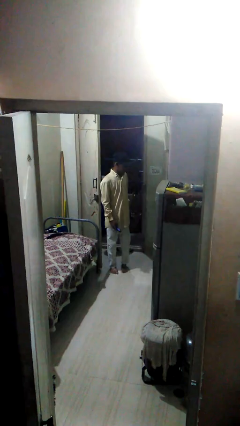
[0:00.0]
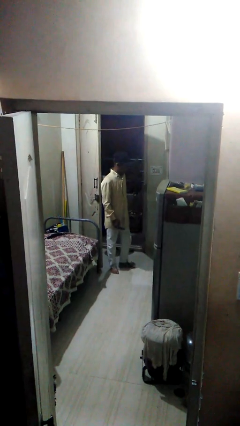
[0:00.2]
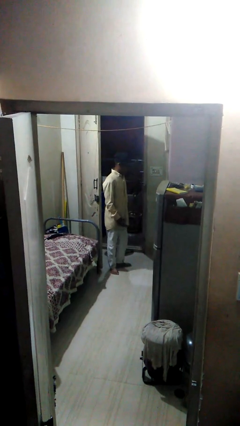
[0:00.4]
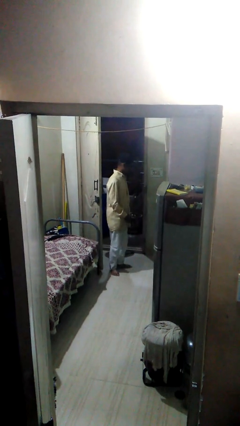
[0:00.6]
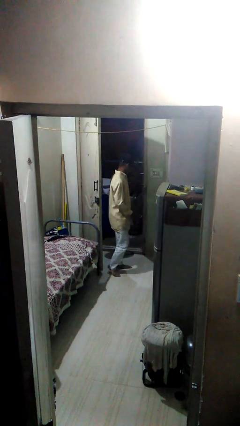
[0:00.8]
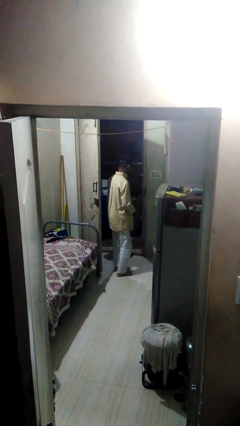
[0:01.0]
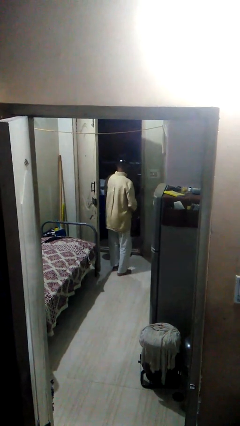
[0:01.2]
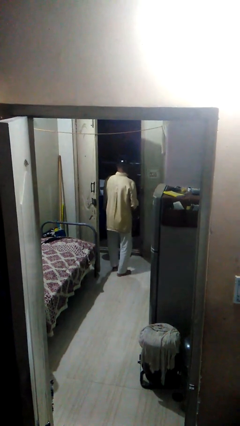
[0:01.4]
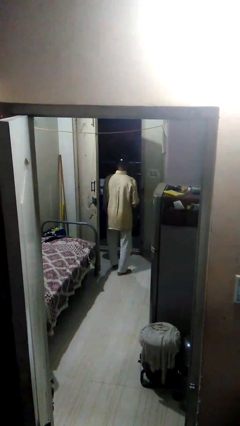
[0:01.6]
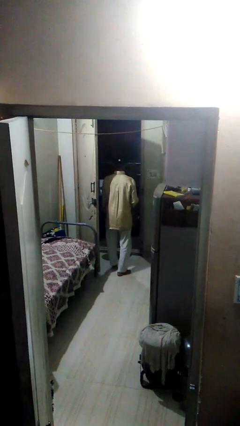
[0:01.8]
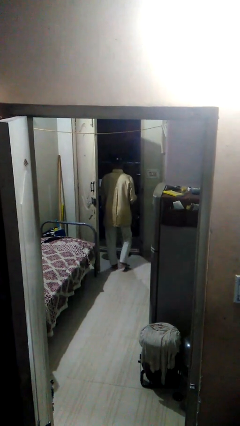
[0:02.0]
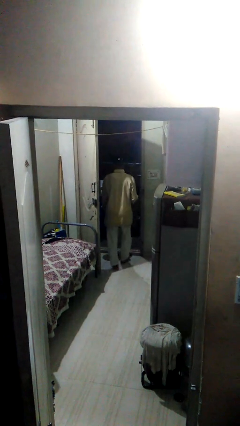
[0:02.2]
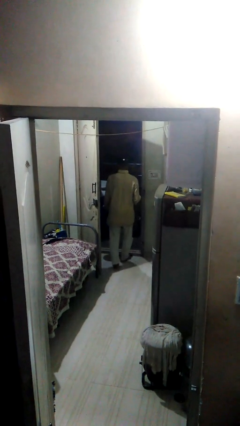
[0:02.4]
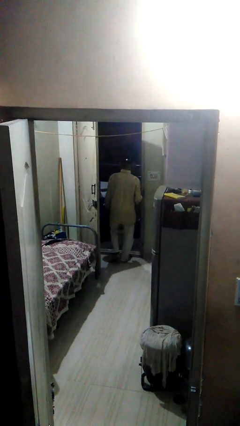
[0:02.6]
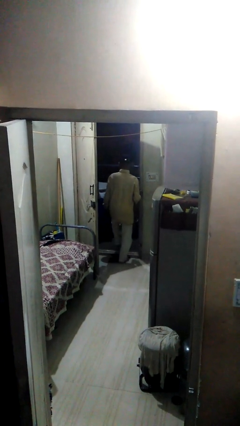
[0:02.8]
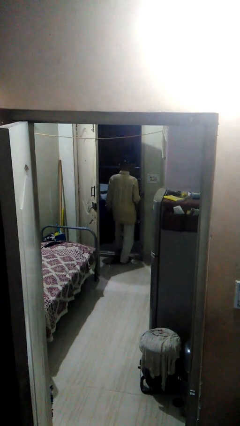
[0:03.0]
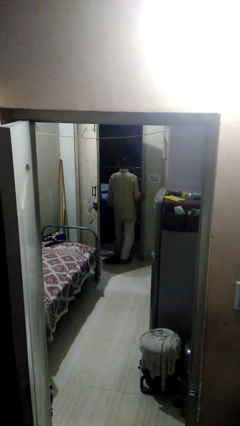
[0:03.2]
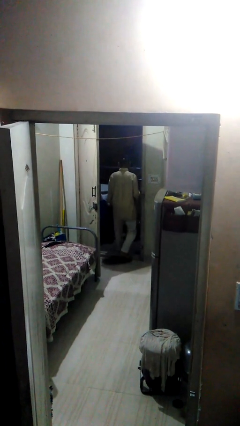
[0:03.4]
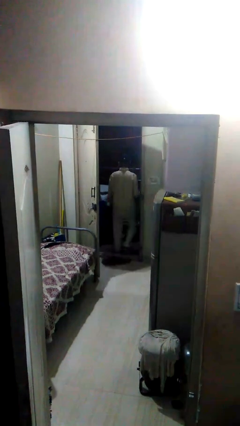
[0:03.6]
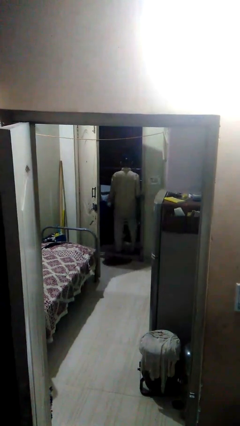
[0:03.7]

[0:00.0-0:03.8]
person exits scene through structure

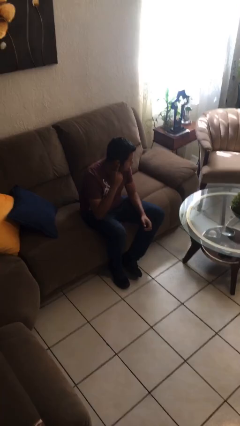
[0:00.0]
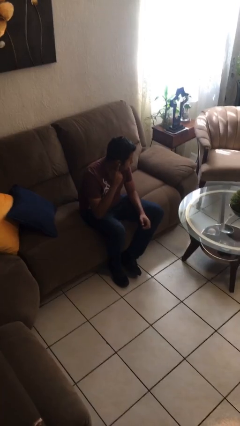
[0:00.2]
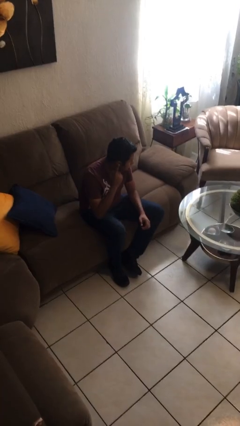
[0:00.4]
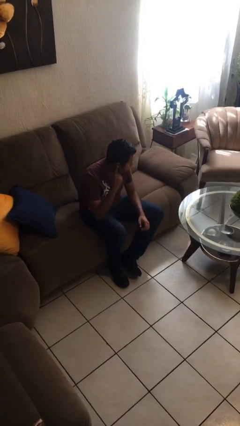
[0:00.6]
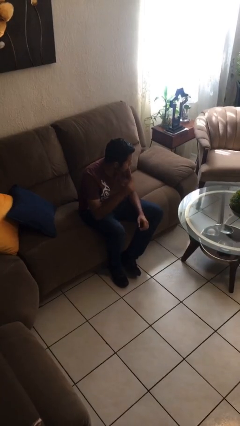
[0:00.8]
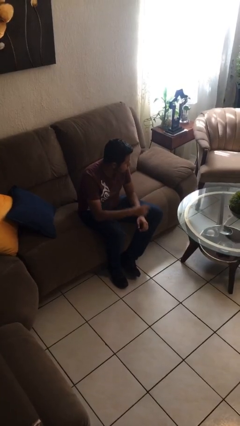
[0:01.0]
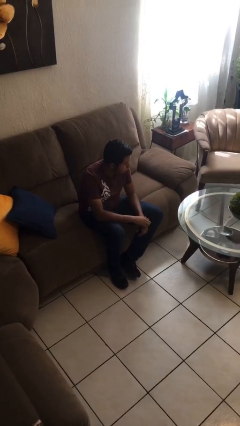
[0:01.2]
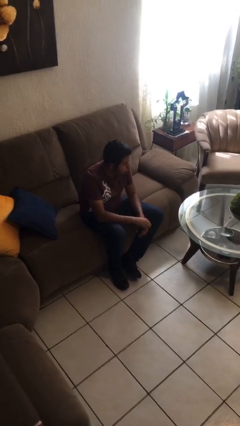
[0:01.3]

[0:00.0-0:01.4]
person gestures listen closely

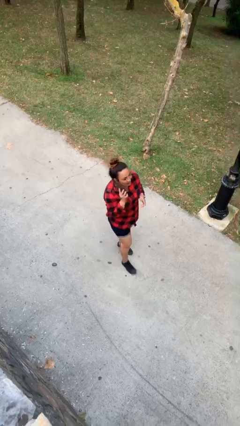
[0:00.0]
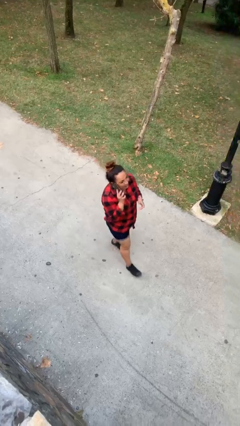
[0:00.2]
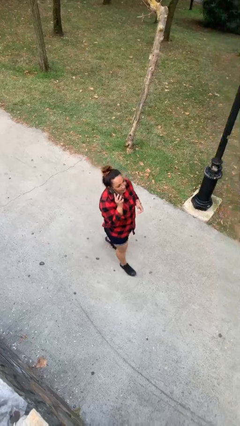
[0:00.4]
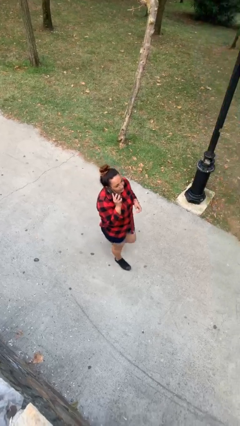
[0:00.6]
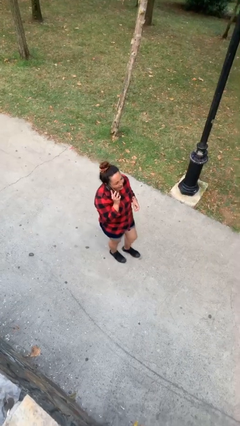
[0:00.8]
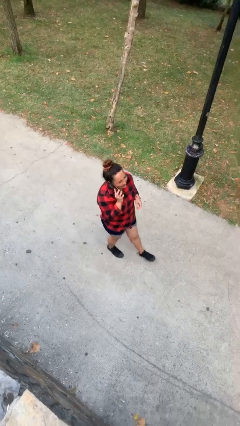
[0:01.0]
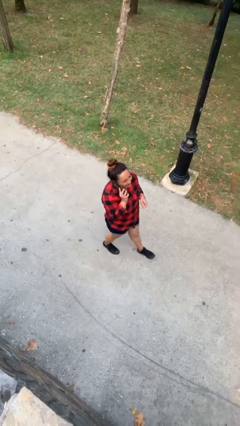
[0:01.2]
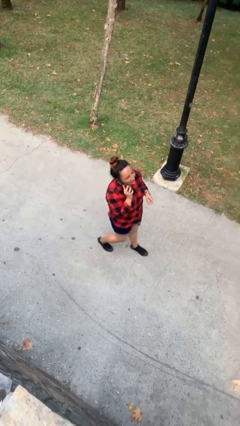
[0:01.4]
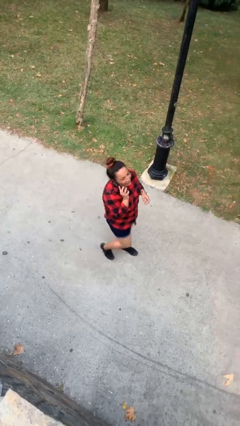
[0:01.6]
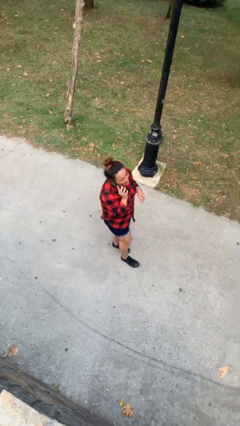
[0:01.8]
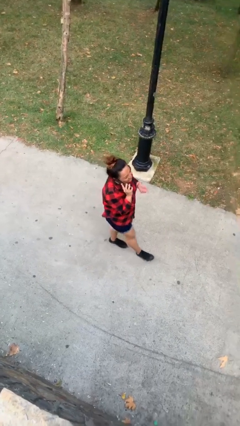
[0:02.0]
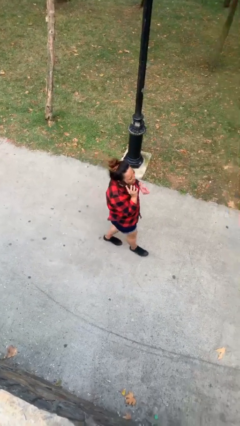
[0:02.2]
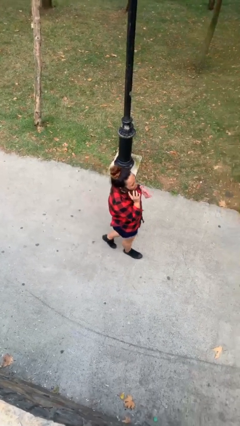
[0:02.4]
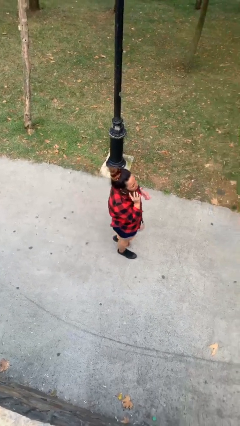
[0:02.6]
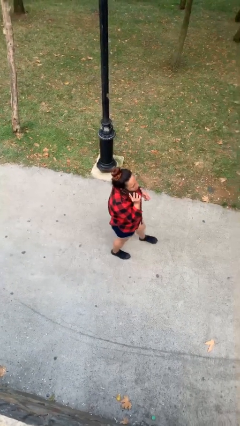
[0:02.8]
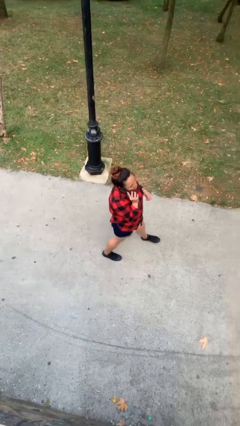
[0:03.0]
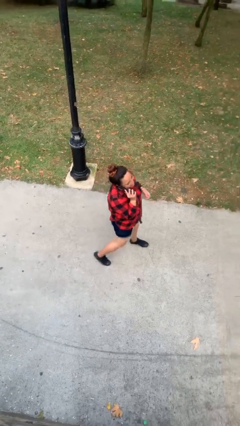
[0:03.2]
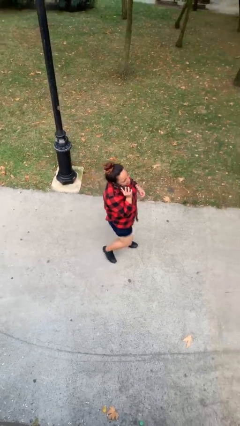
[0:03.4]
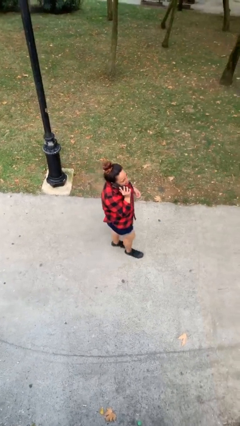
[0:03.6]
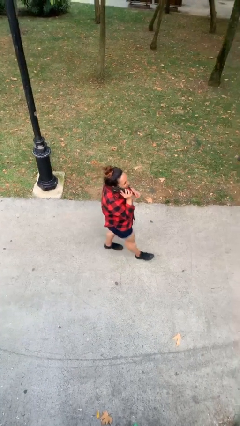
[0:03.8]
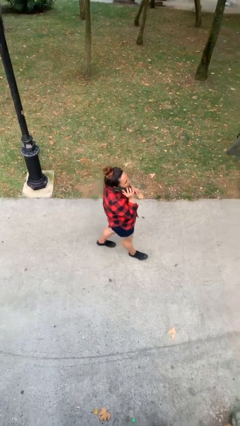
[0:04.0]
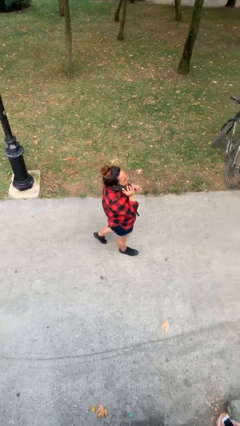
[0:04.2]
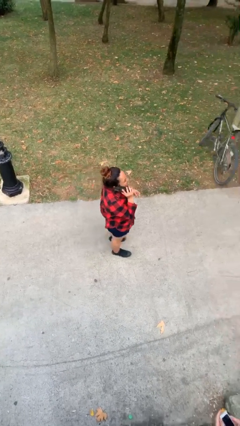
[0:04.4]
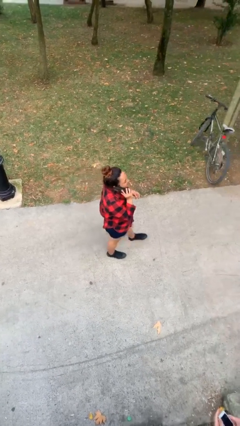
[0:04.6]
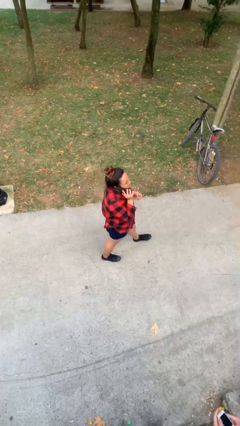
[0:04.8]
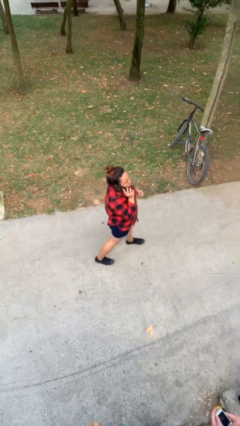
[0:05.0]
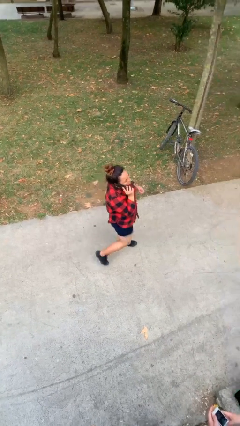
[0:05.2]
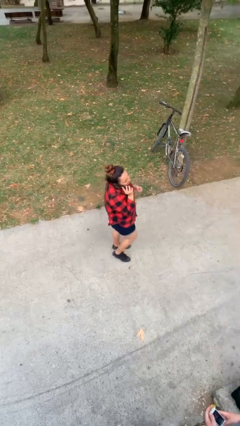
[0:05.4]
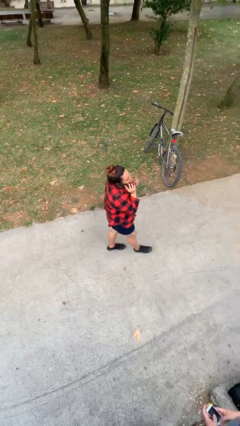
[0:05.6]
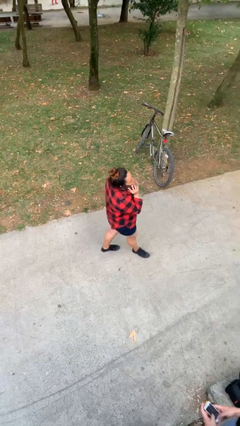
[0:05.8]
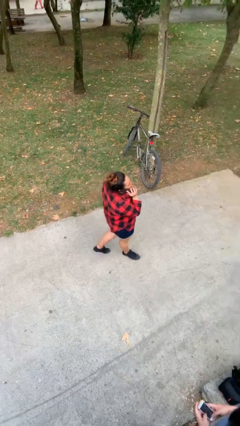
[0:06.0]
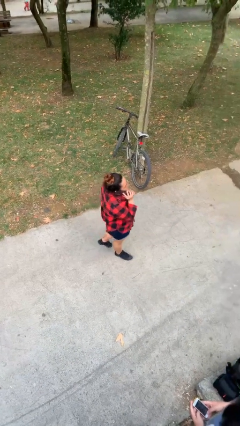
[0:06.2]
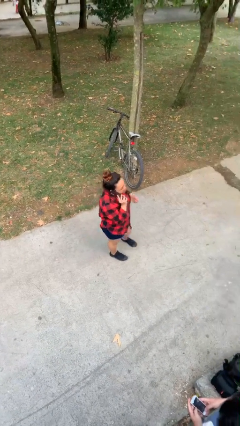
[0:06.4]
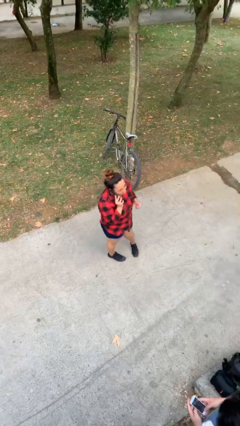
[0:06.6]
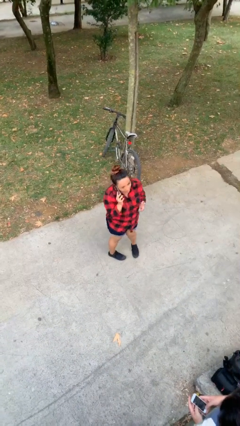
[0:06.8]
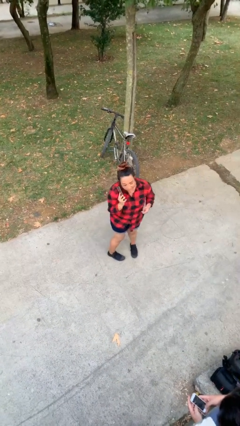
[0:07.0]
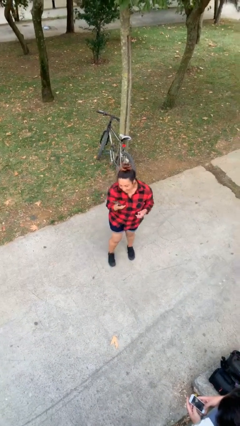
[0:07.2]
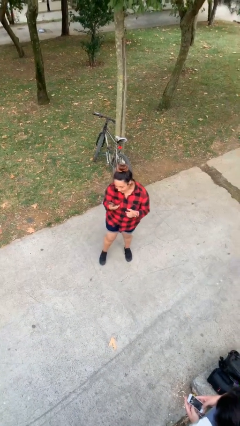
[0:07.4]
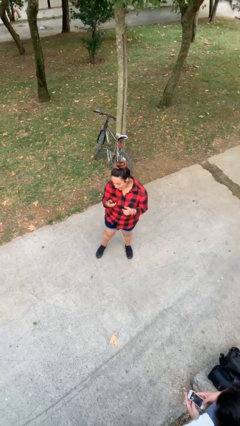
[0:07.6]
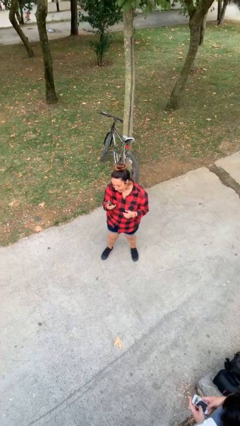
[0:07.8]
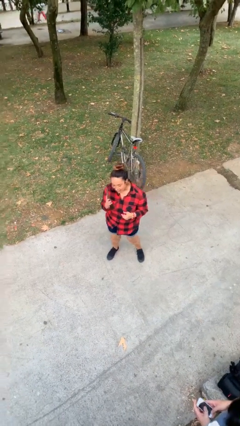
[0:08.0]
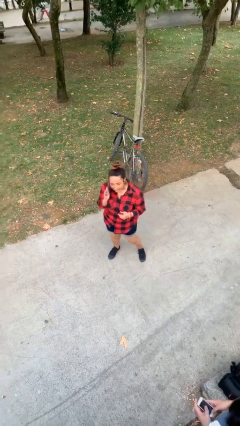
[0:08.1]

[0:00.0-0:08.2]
person talks on phone

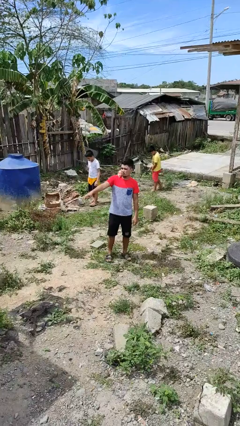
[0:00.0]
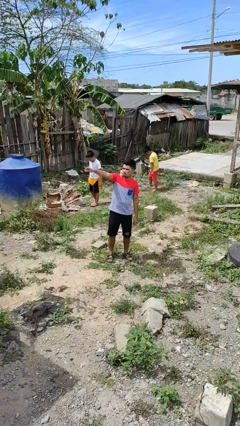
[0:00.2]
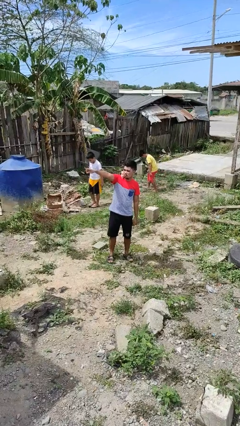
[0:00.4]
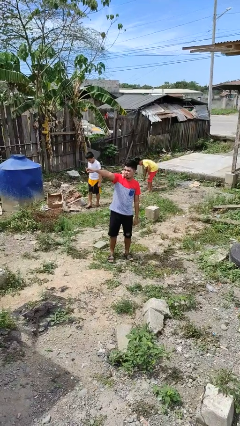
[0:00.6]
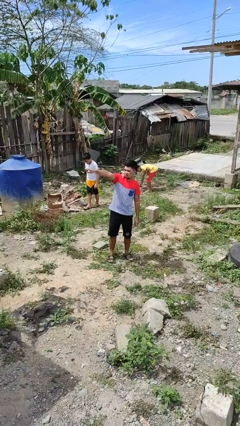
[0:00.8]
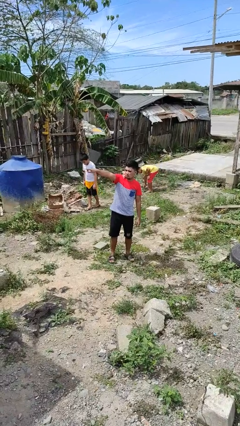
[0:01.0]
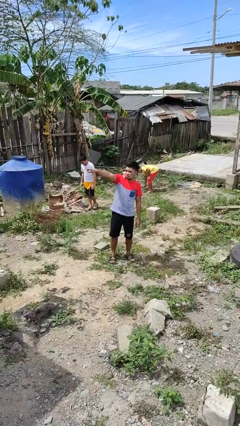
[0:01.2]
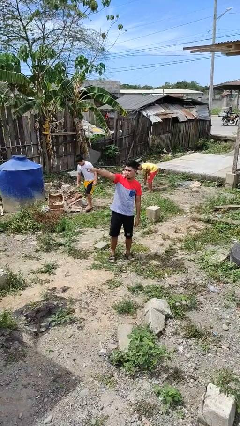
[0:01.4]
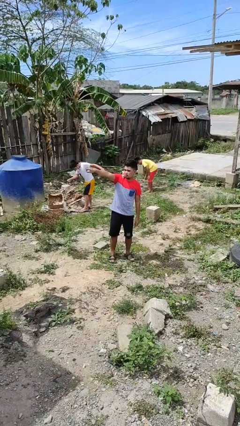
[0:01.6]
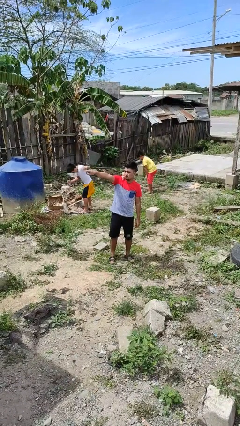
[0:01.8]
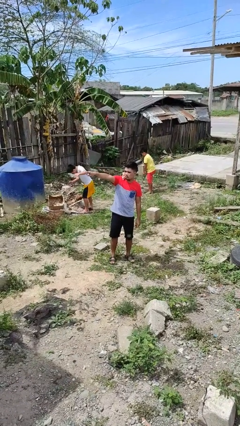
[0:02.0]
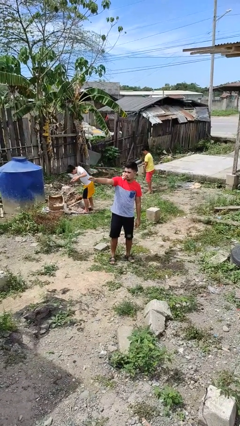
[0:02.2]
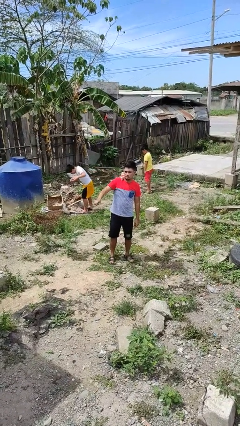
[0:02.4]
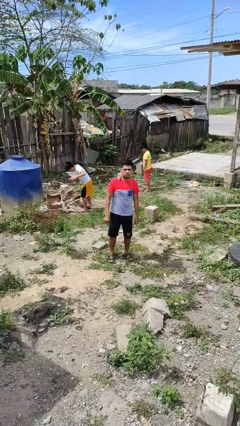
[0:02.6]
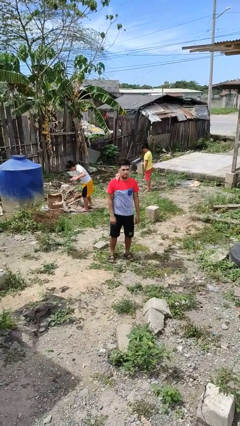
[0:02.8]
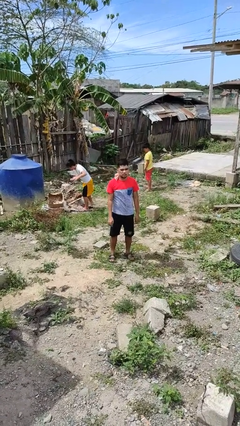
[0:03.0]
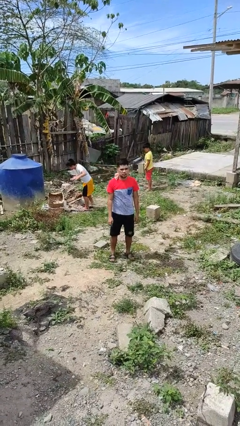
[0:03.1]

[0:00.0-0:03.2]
person points at person

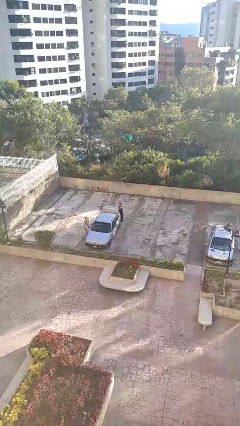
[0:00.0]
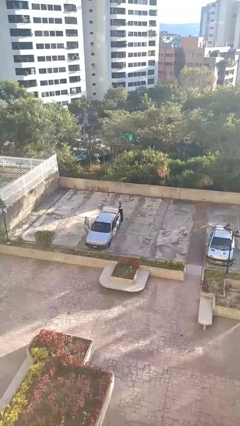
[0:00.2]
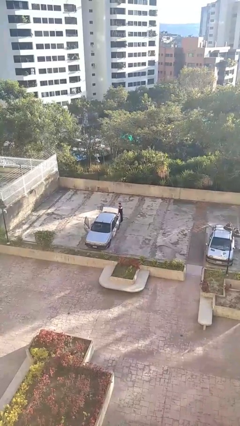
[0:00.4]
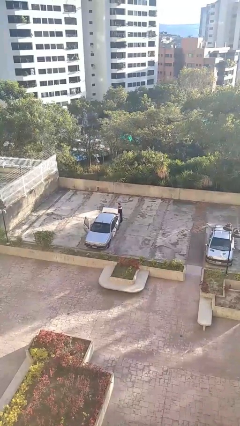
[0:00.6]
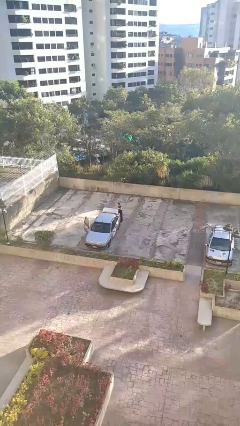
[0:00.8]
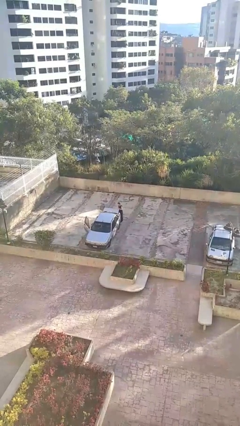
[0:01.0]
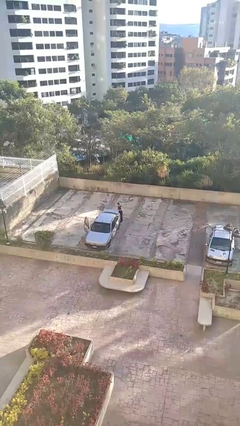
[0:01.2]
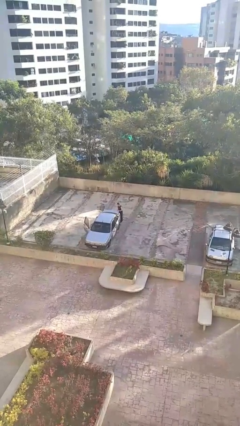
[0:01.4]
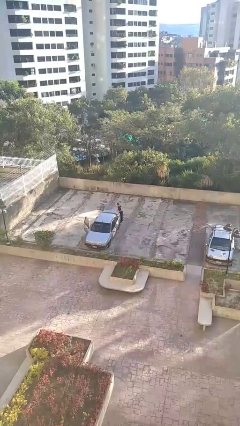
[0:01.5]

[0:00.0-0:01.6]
person closes car trunk
